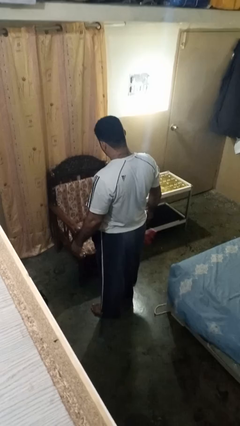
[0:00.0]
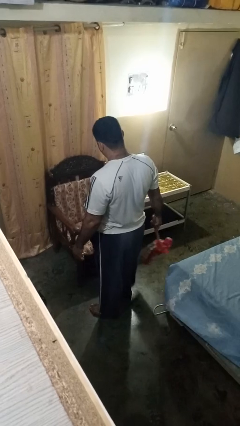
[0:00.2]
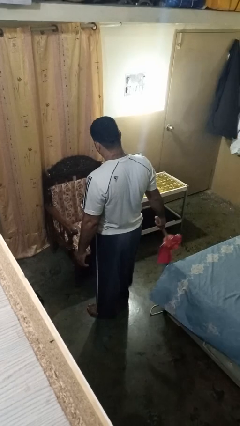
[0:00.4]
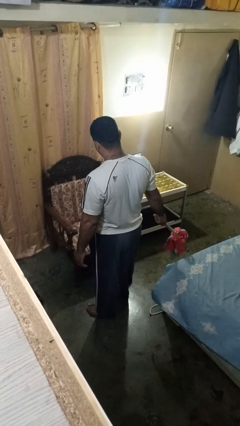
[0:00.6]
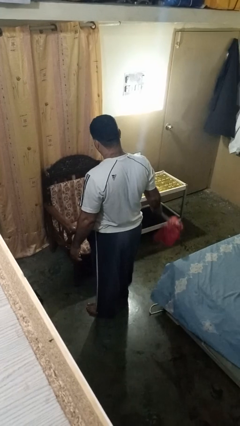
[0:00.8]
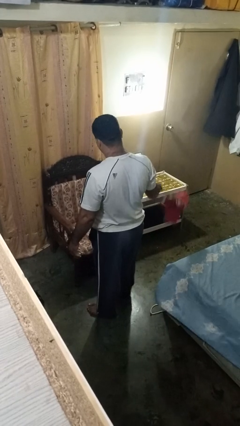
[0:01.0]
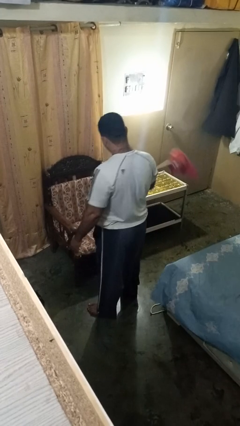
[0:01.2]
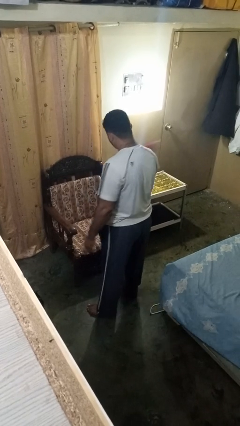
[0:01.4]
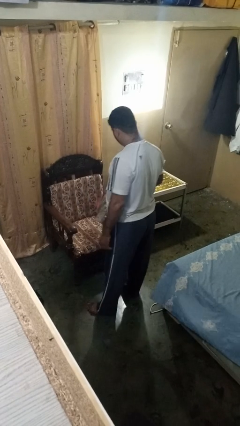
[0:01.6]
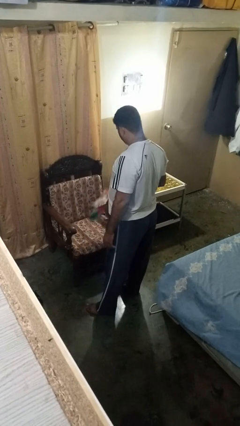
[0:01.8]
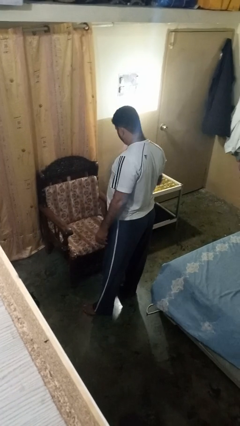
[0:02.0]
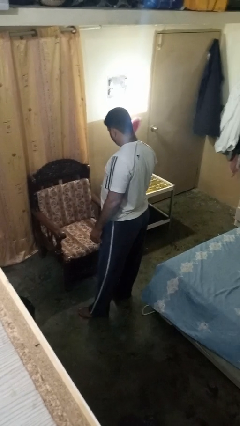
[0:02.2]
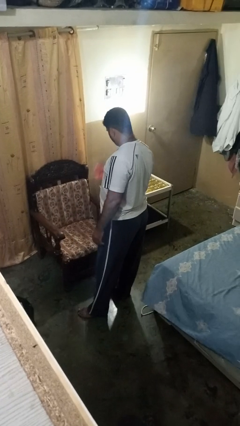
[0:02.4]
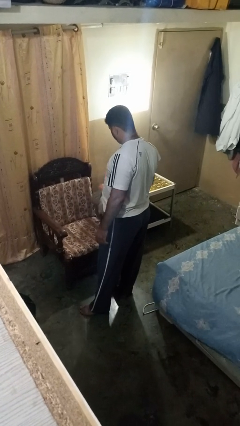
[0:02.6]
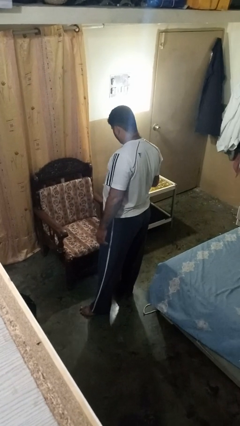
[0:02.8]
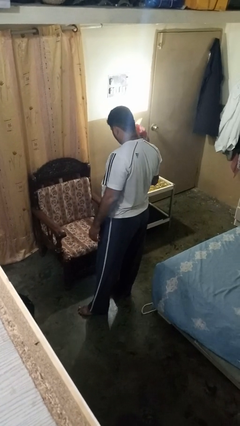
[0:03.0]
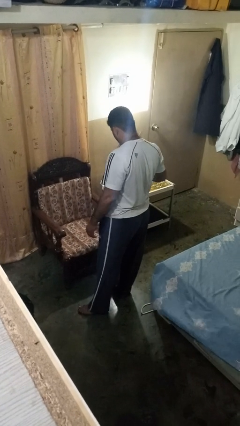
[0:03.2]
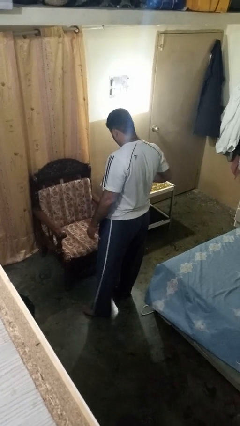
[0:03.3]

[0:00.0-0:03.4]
person dusts furniture

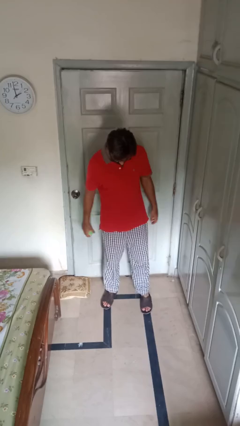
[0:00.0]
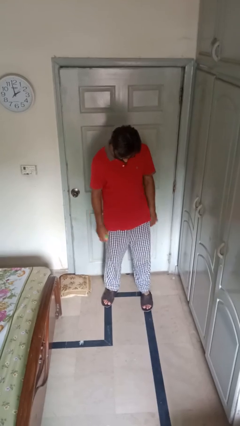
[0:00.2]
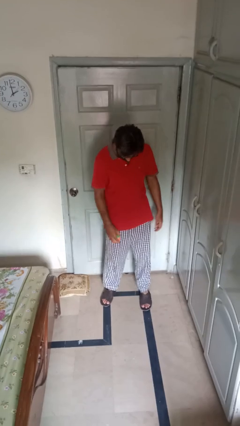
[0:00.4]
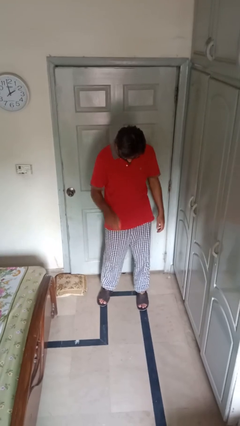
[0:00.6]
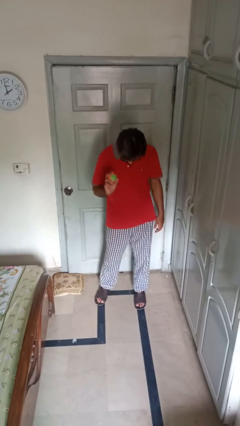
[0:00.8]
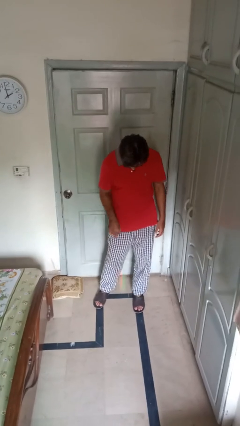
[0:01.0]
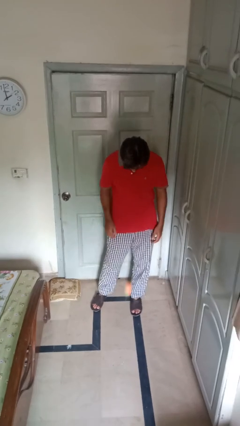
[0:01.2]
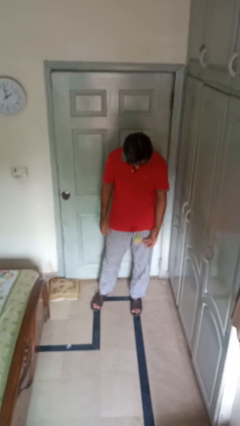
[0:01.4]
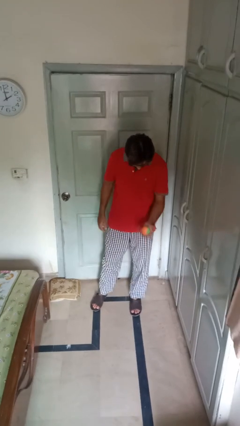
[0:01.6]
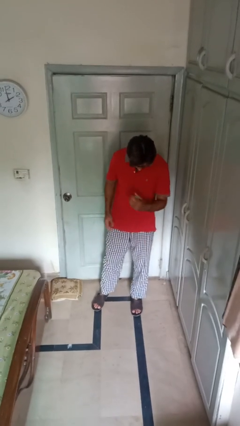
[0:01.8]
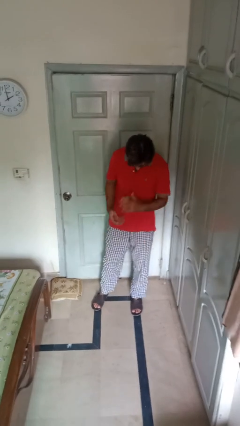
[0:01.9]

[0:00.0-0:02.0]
person bounces ball on floor

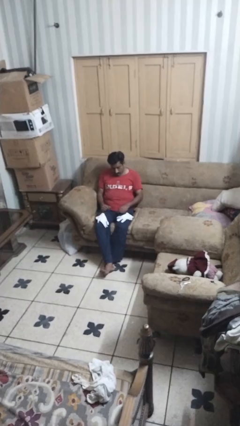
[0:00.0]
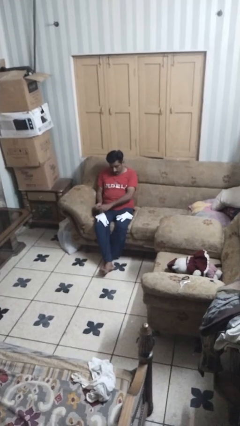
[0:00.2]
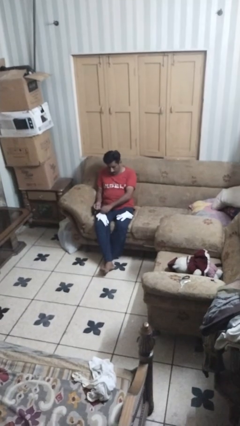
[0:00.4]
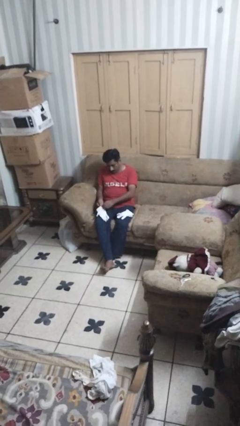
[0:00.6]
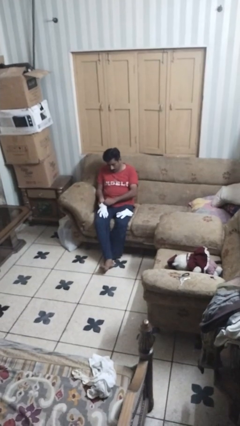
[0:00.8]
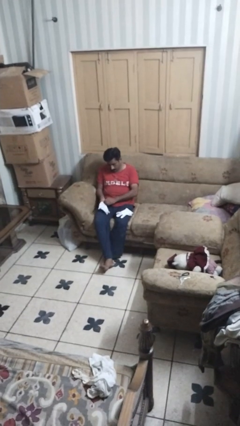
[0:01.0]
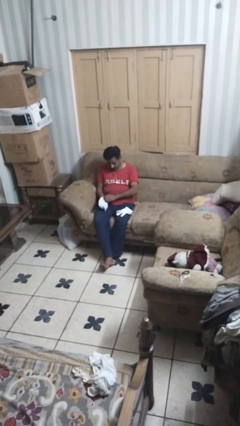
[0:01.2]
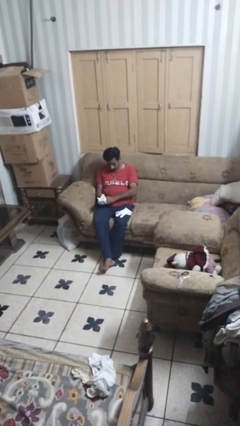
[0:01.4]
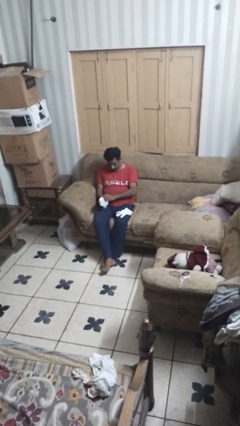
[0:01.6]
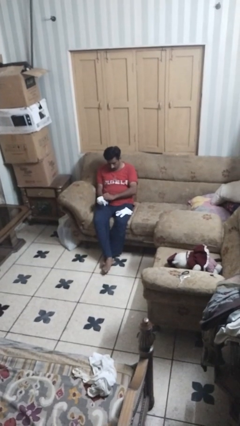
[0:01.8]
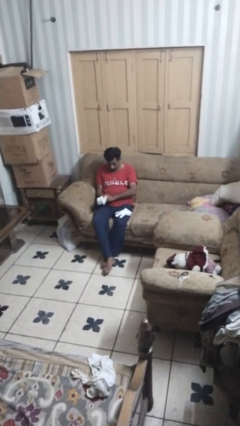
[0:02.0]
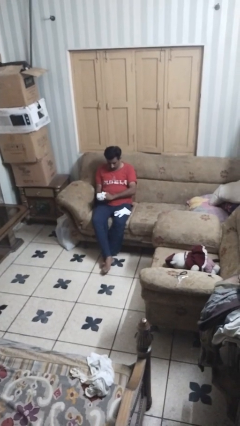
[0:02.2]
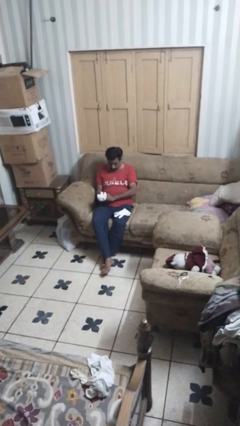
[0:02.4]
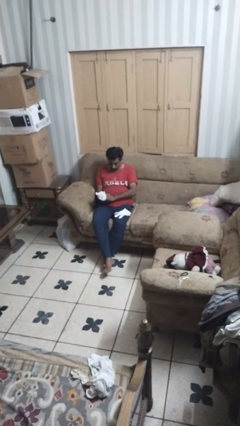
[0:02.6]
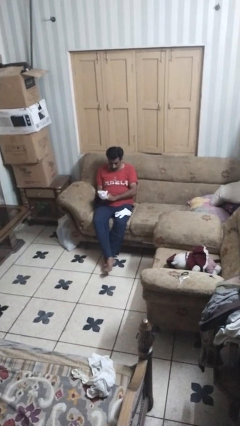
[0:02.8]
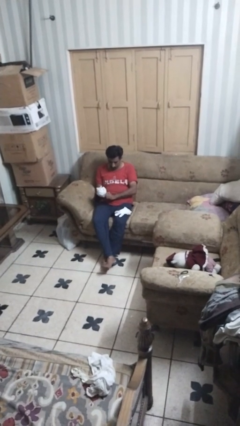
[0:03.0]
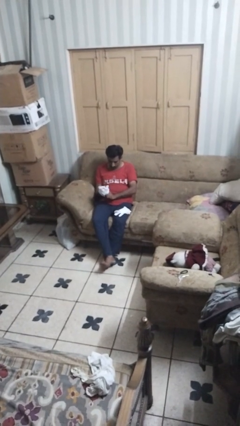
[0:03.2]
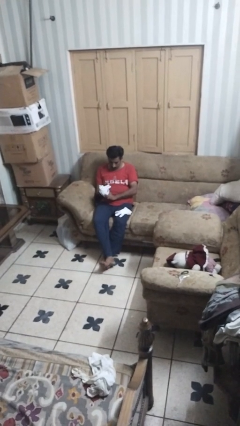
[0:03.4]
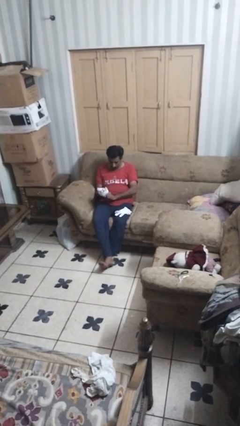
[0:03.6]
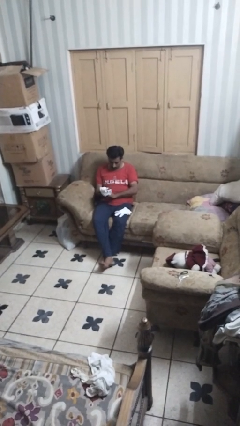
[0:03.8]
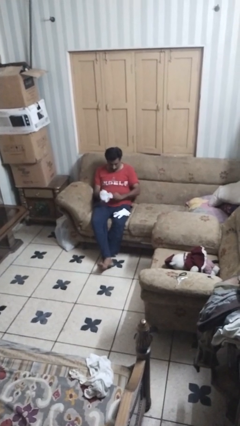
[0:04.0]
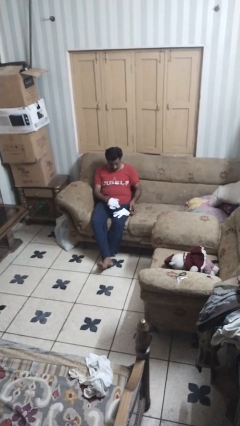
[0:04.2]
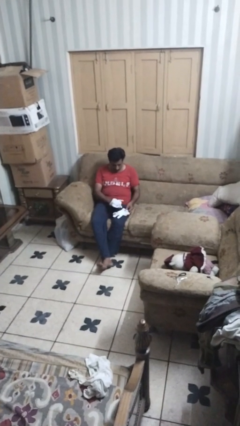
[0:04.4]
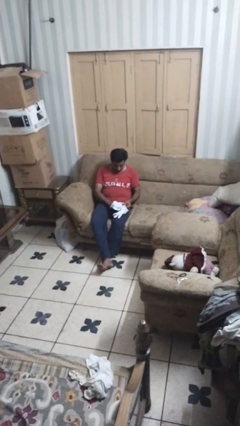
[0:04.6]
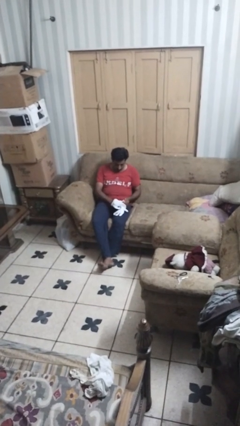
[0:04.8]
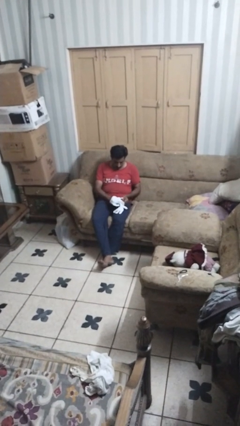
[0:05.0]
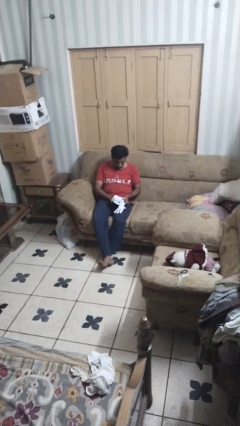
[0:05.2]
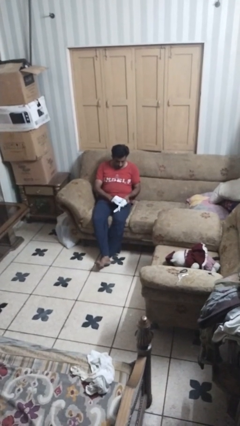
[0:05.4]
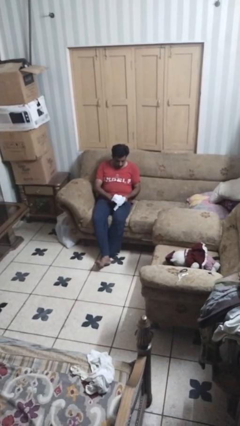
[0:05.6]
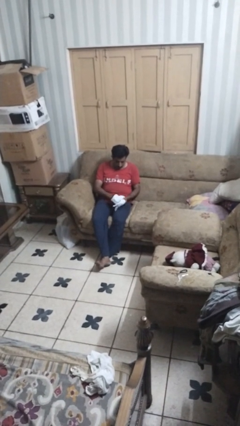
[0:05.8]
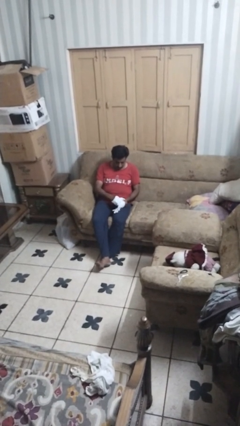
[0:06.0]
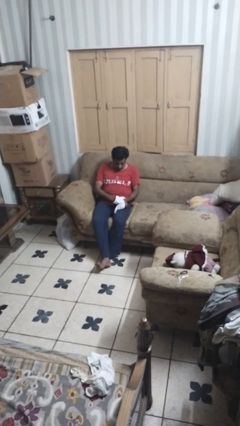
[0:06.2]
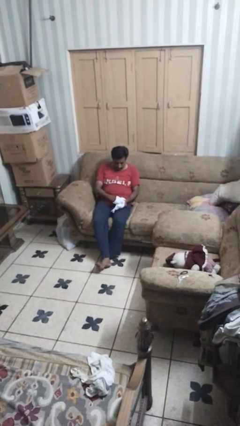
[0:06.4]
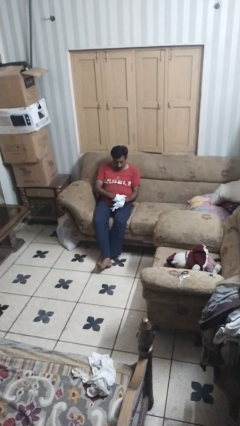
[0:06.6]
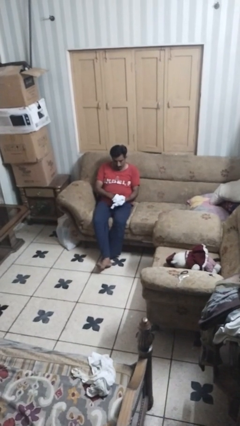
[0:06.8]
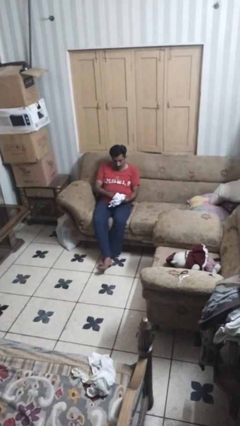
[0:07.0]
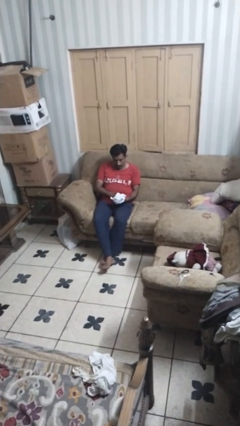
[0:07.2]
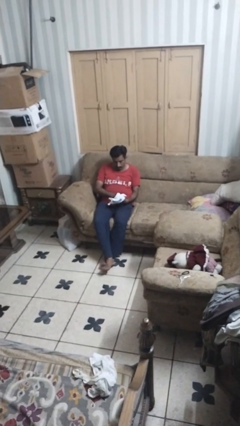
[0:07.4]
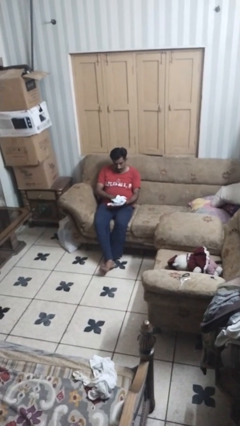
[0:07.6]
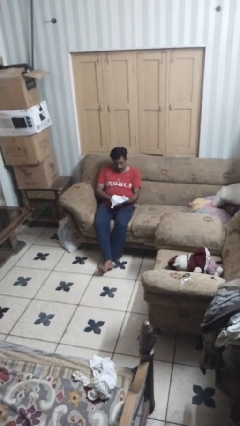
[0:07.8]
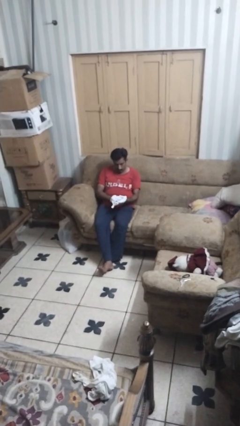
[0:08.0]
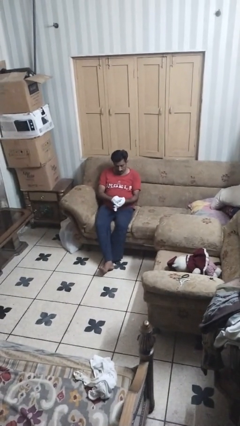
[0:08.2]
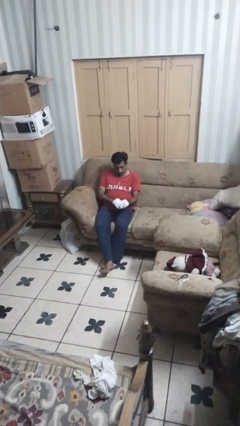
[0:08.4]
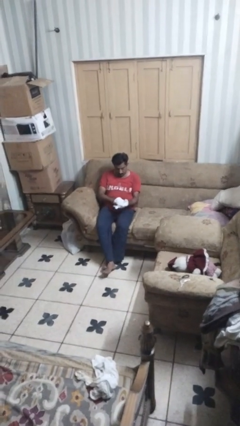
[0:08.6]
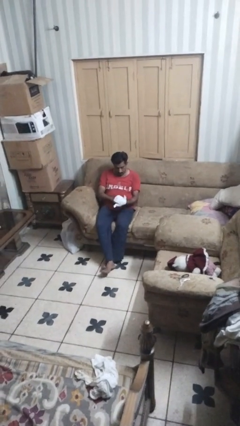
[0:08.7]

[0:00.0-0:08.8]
person puts on gloves

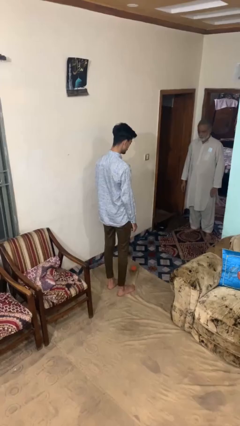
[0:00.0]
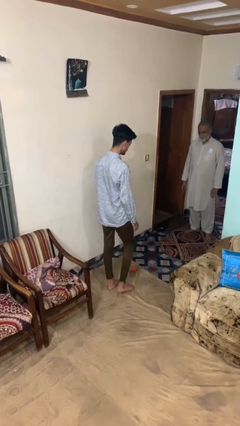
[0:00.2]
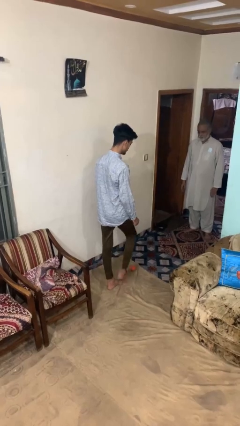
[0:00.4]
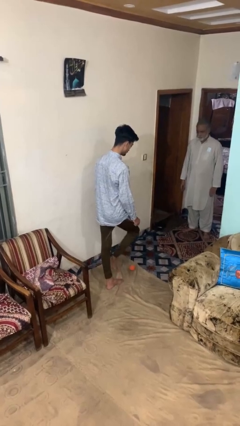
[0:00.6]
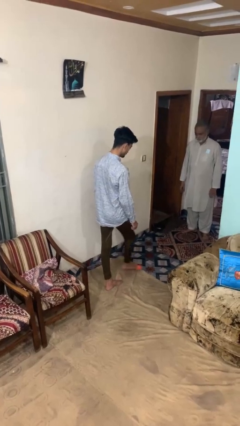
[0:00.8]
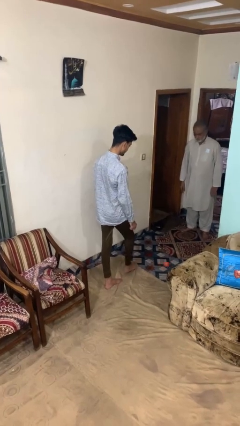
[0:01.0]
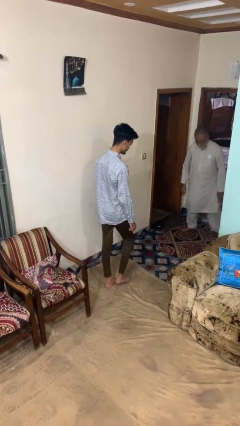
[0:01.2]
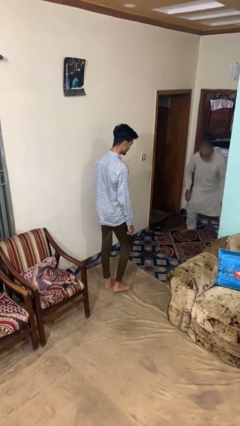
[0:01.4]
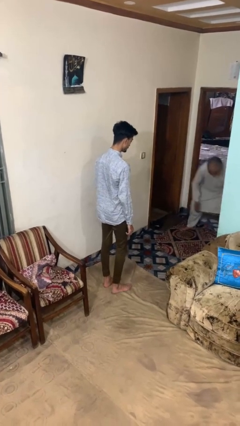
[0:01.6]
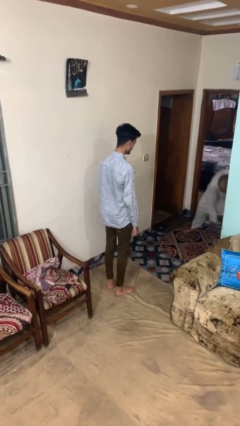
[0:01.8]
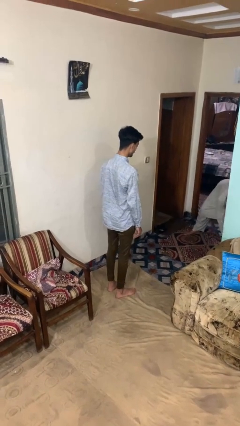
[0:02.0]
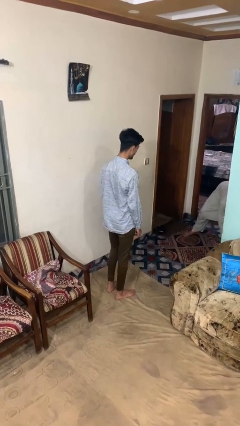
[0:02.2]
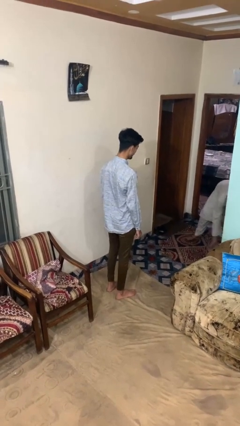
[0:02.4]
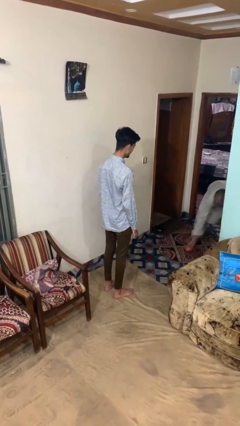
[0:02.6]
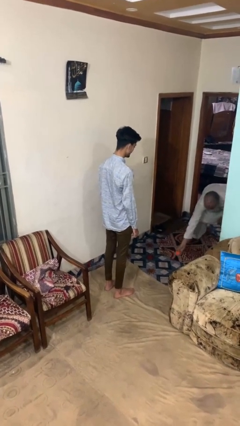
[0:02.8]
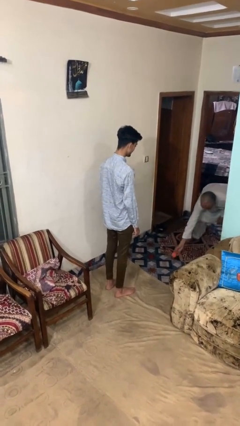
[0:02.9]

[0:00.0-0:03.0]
person kicks object to person

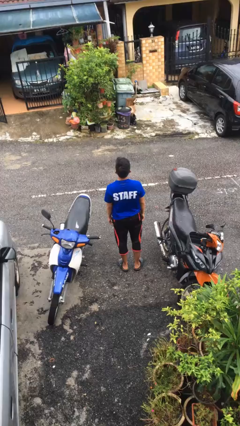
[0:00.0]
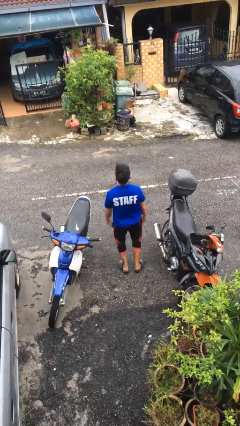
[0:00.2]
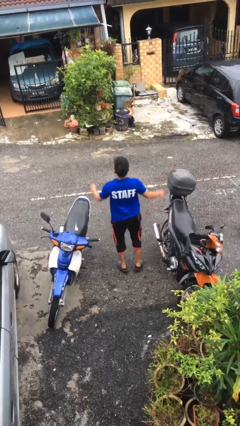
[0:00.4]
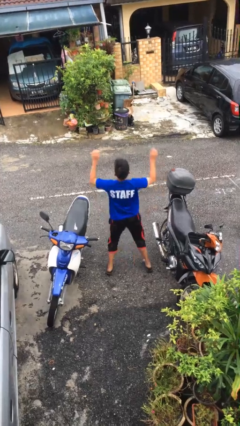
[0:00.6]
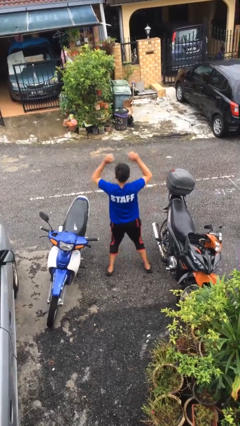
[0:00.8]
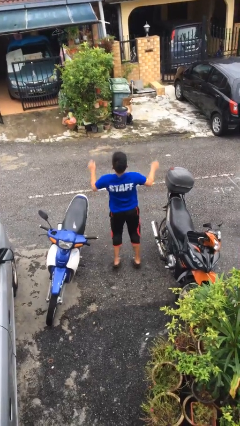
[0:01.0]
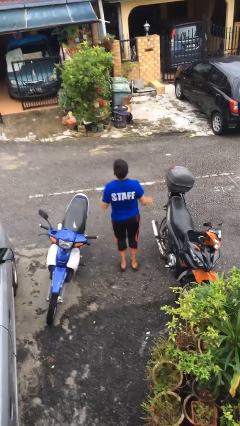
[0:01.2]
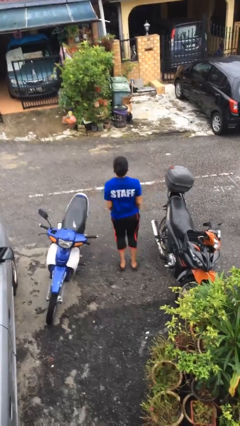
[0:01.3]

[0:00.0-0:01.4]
person exercises with jumping jacks
